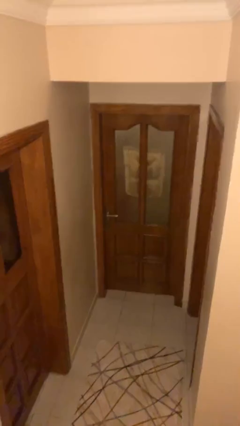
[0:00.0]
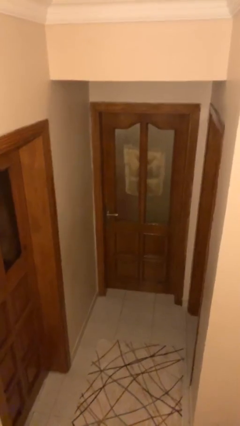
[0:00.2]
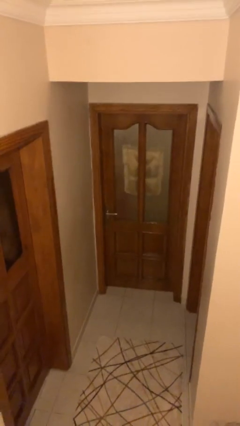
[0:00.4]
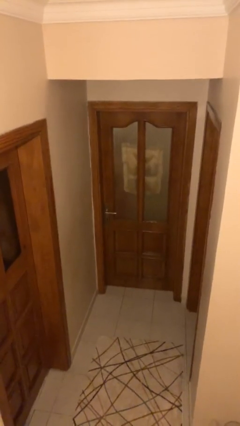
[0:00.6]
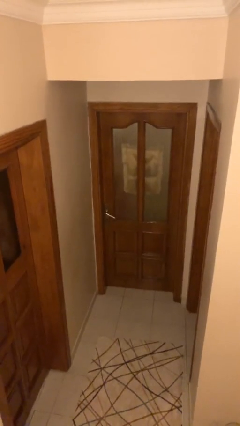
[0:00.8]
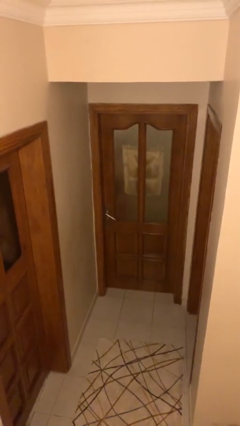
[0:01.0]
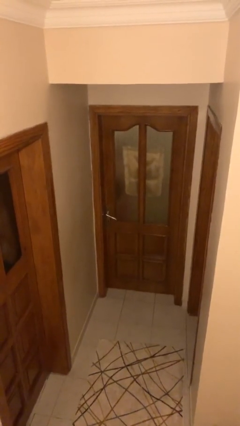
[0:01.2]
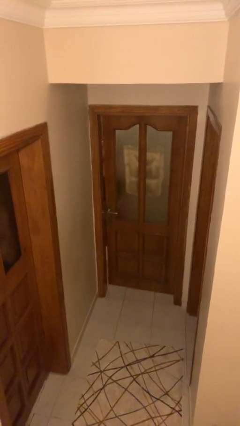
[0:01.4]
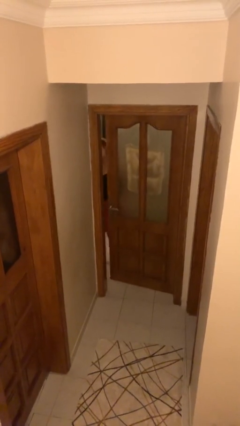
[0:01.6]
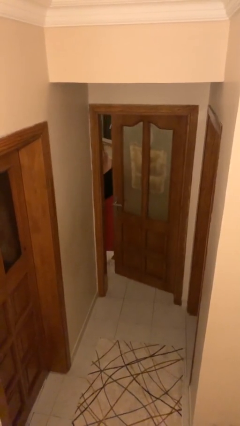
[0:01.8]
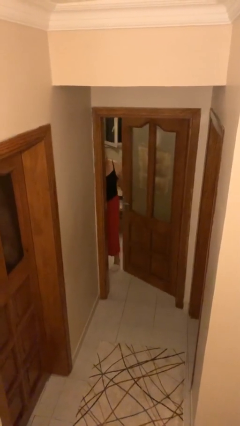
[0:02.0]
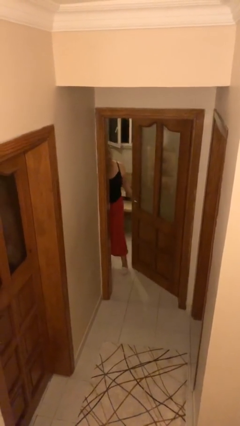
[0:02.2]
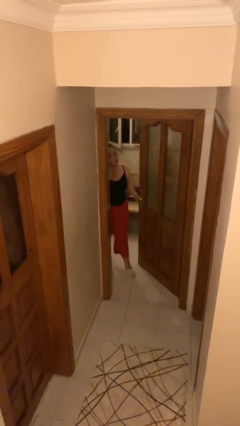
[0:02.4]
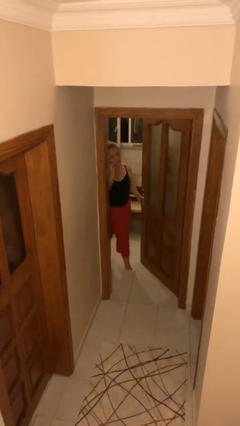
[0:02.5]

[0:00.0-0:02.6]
person opens facility door

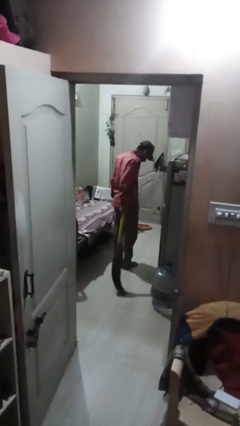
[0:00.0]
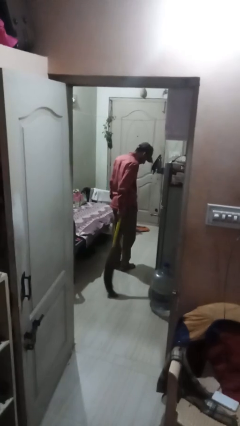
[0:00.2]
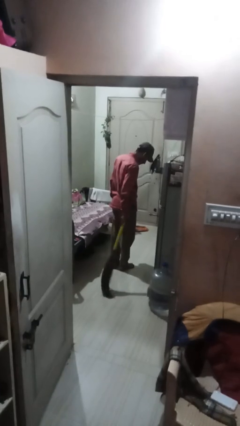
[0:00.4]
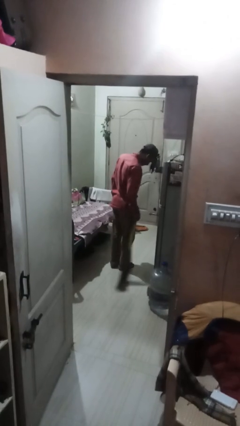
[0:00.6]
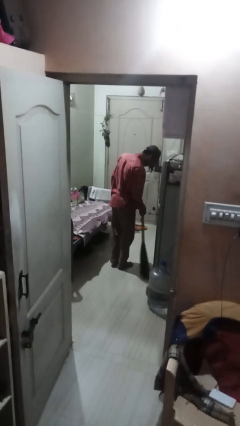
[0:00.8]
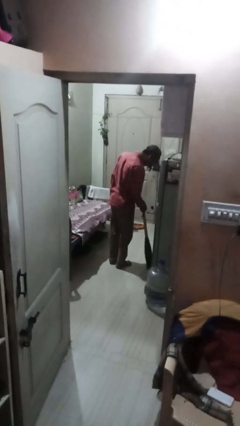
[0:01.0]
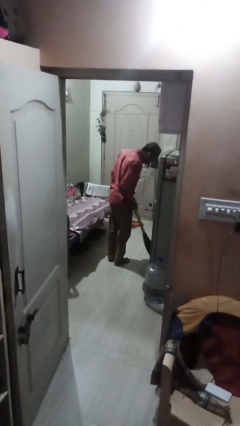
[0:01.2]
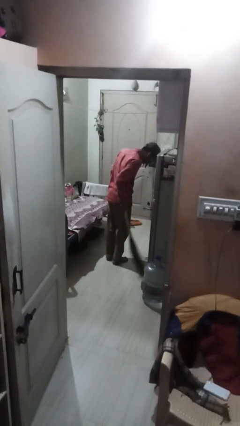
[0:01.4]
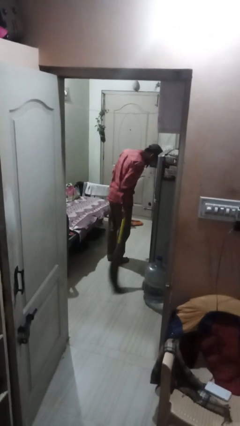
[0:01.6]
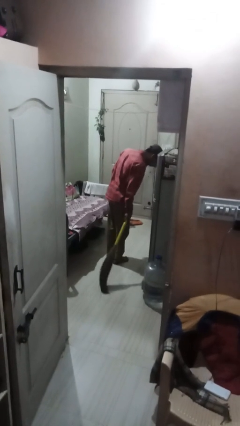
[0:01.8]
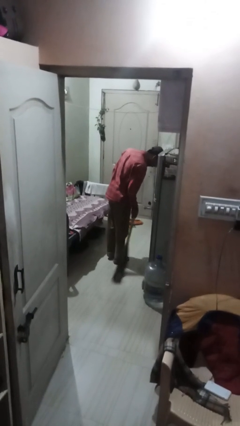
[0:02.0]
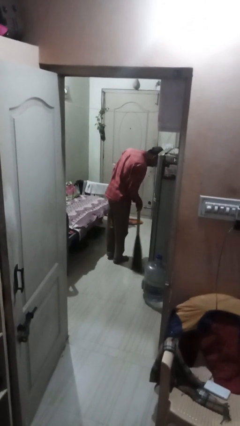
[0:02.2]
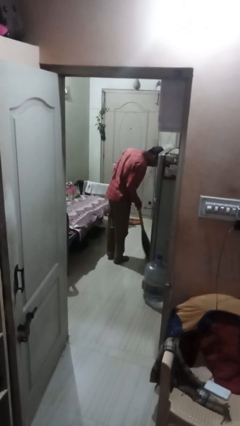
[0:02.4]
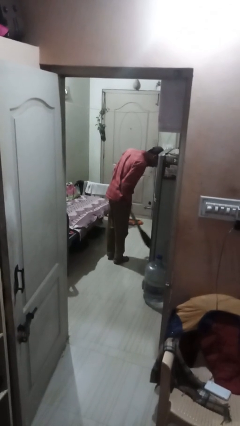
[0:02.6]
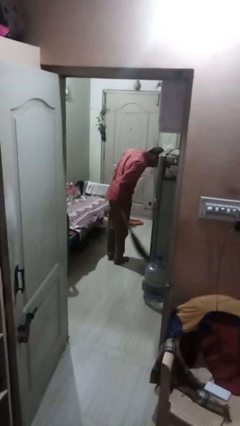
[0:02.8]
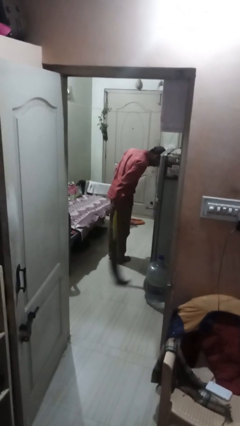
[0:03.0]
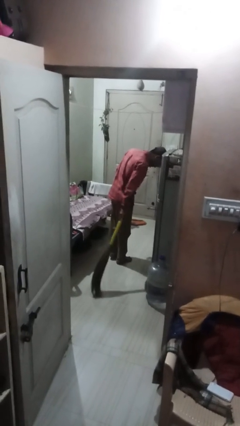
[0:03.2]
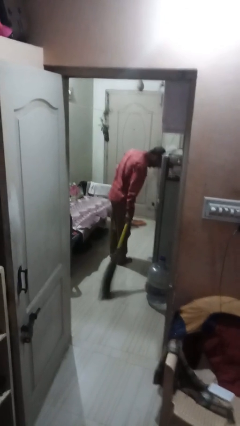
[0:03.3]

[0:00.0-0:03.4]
person sweeps floor

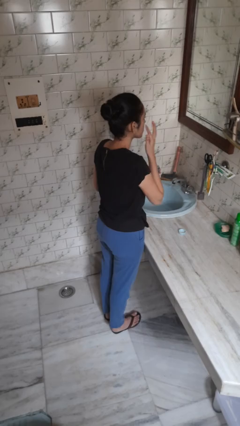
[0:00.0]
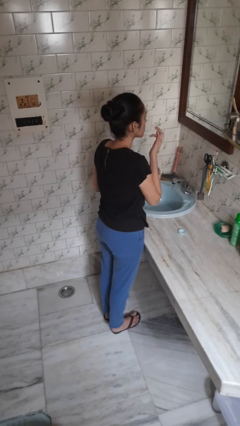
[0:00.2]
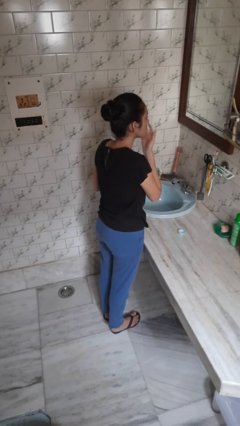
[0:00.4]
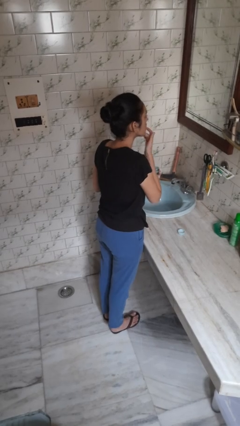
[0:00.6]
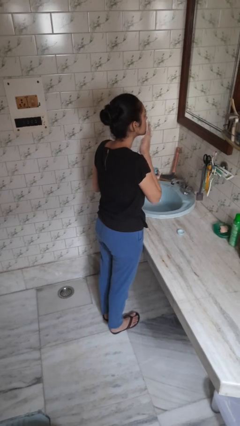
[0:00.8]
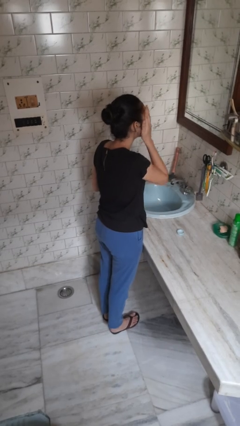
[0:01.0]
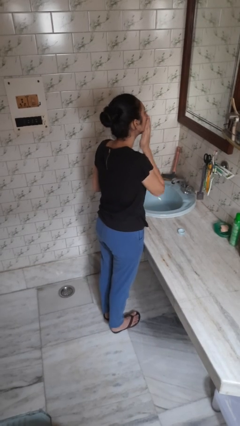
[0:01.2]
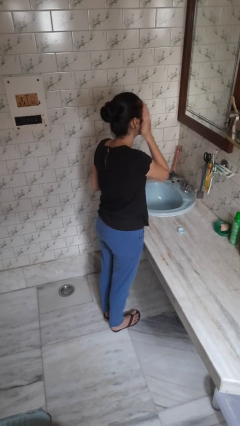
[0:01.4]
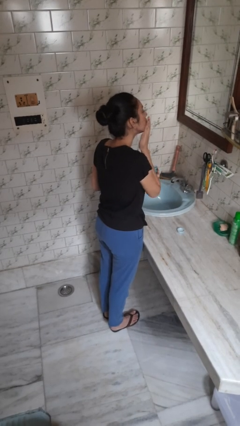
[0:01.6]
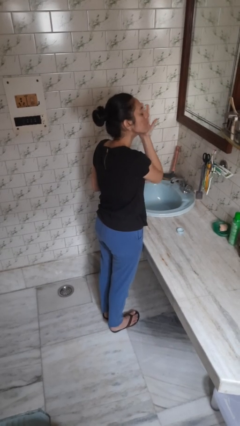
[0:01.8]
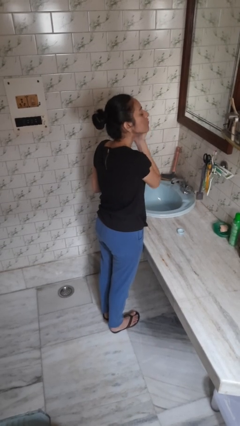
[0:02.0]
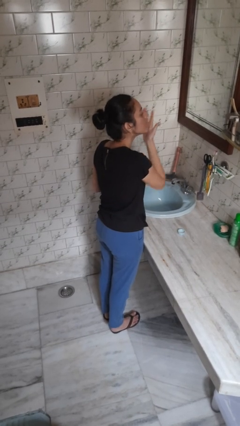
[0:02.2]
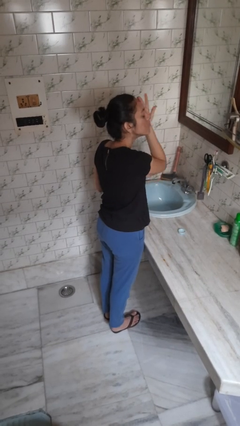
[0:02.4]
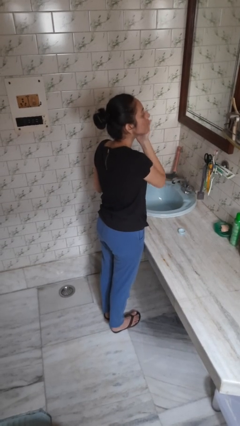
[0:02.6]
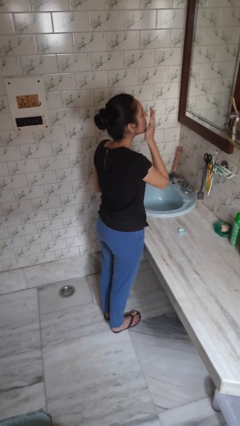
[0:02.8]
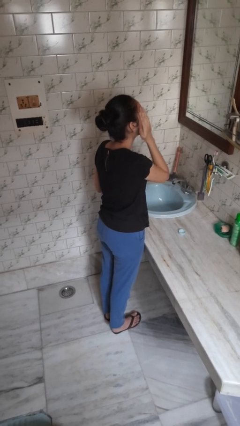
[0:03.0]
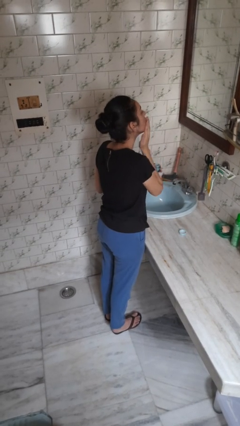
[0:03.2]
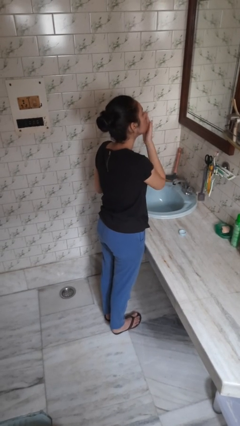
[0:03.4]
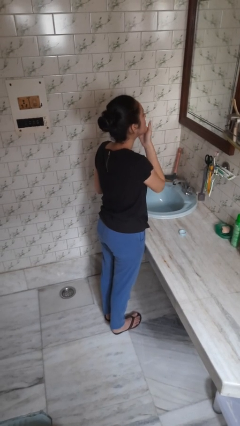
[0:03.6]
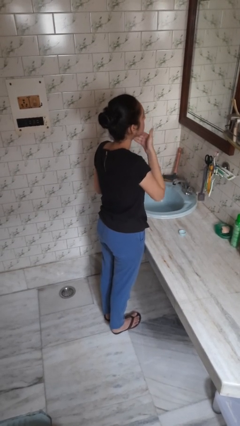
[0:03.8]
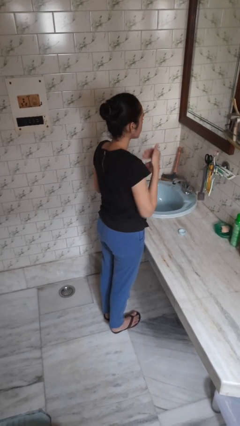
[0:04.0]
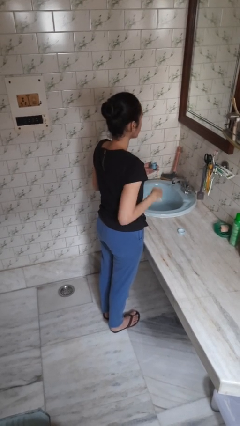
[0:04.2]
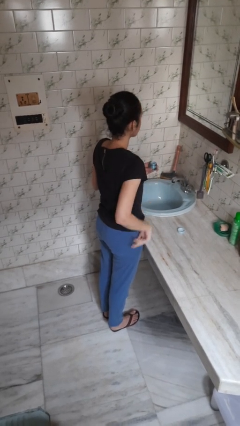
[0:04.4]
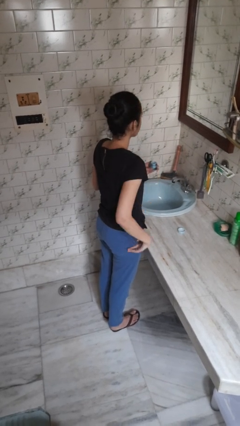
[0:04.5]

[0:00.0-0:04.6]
person applies facial moisturizer

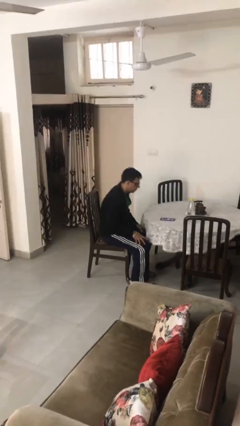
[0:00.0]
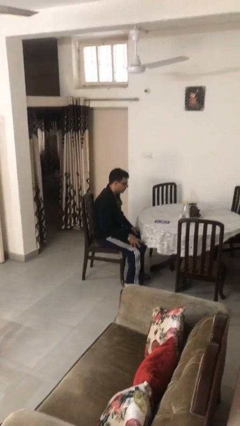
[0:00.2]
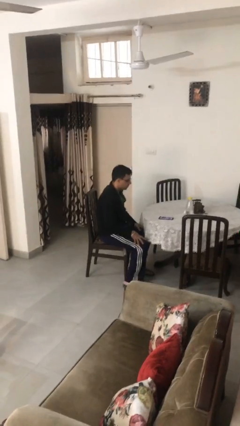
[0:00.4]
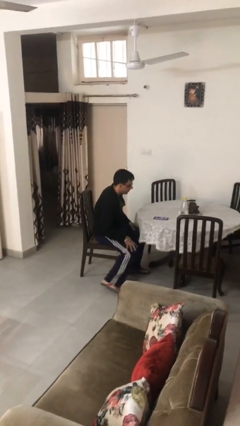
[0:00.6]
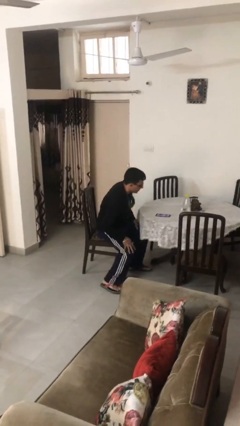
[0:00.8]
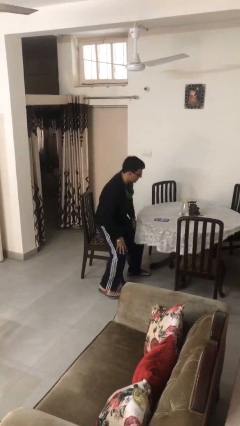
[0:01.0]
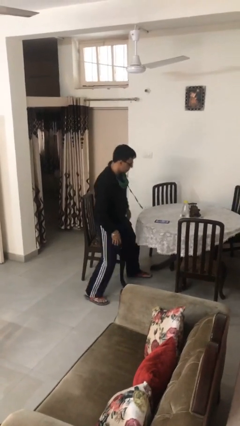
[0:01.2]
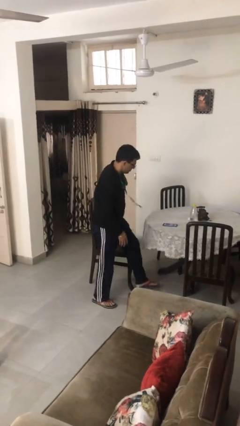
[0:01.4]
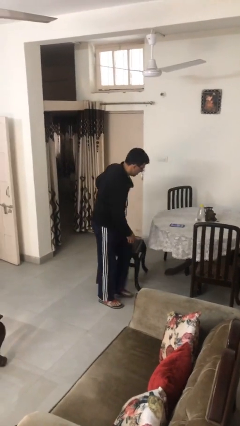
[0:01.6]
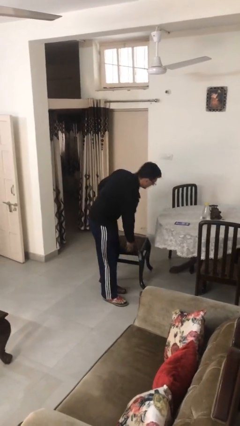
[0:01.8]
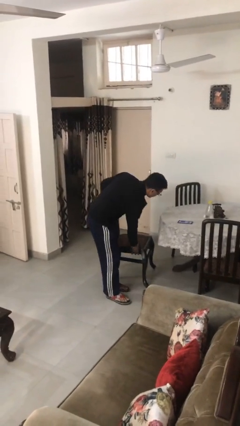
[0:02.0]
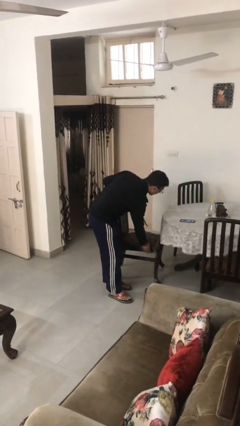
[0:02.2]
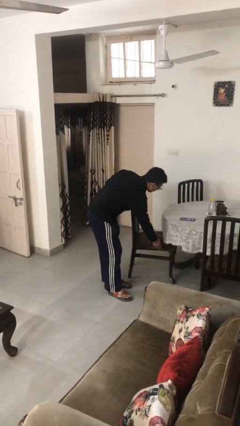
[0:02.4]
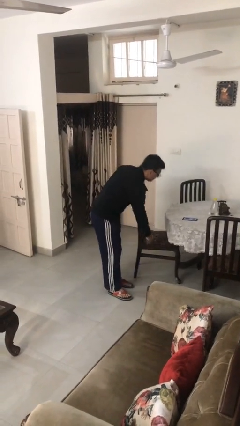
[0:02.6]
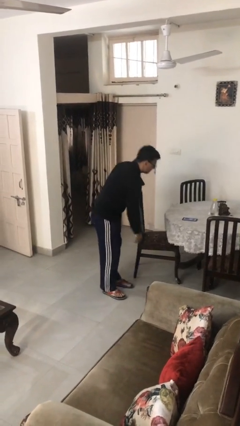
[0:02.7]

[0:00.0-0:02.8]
person stands up

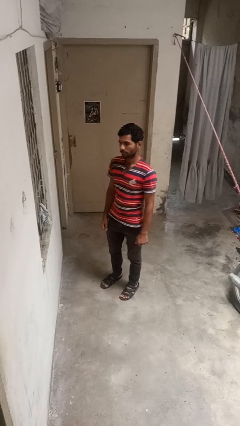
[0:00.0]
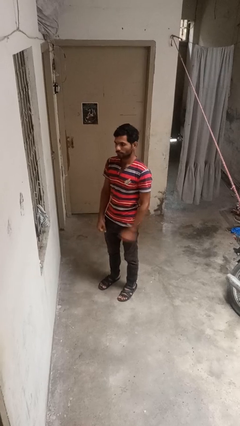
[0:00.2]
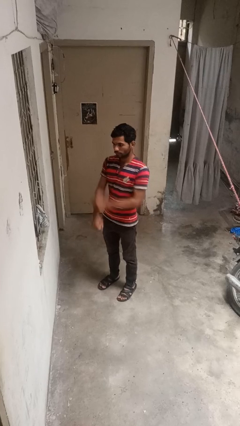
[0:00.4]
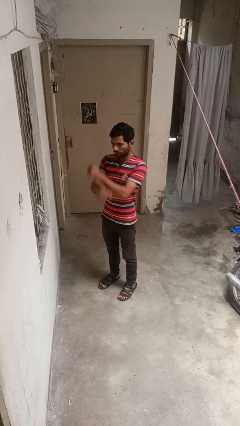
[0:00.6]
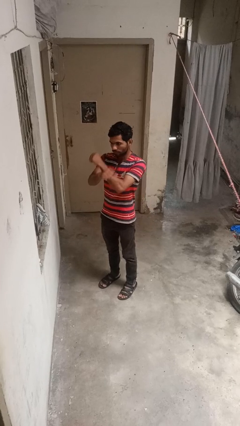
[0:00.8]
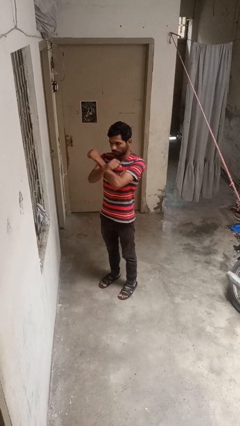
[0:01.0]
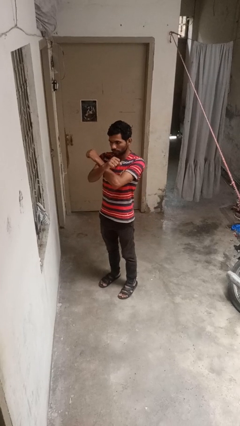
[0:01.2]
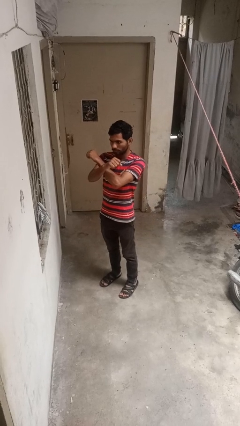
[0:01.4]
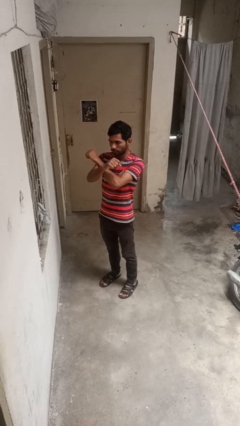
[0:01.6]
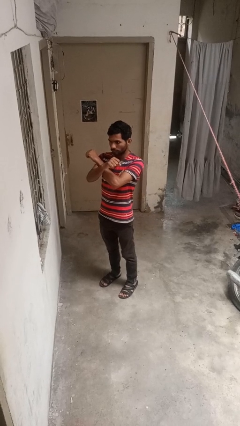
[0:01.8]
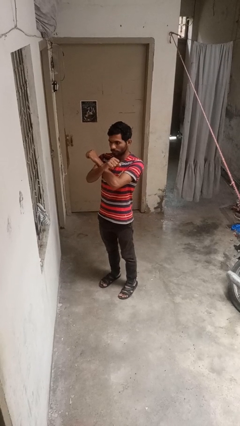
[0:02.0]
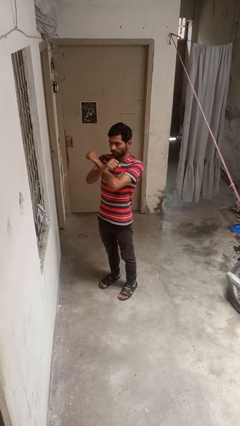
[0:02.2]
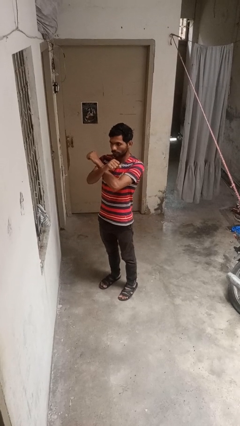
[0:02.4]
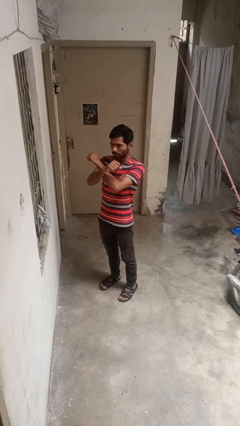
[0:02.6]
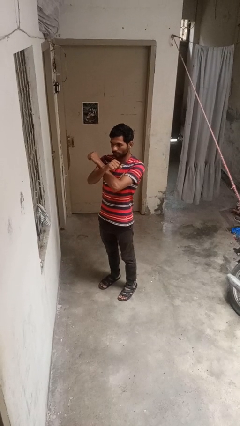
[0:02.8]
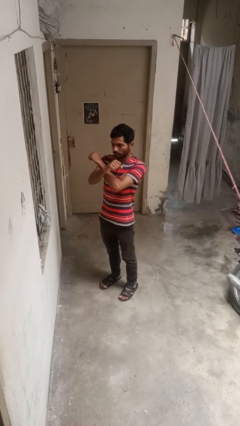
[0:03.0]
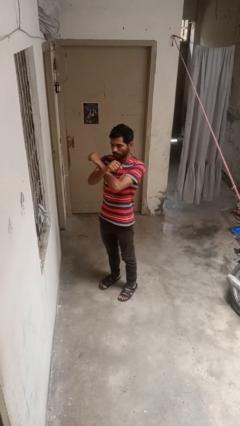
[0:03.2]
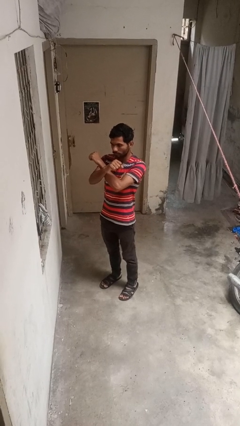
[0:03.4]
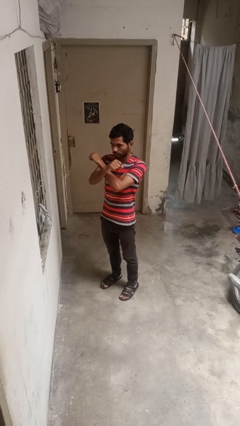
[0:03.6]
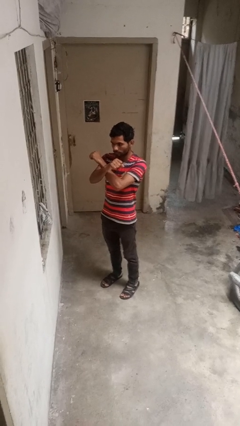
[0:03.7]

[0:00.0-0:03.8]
person gestures arms x
